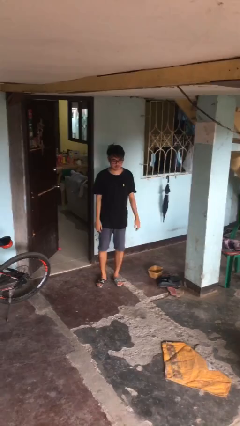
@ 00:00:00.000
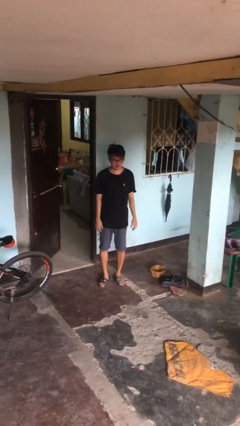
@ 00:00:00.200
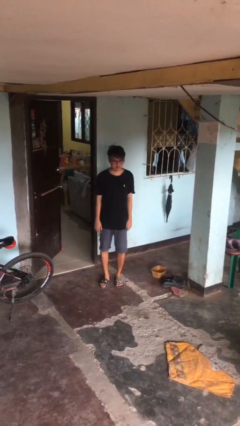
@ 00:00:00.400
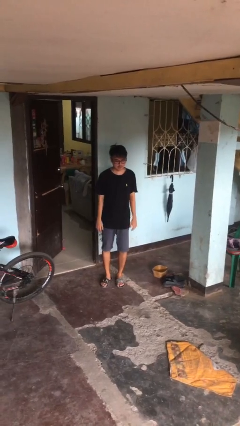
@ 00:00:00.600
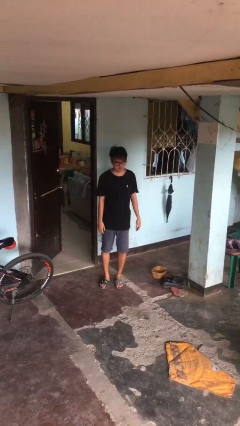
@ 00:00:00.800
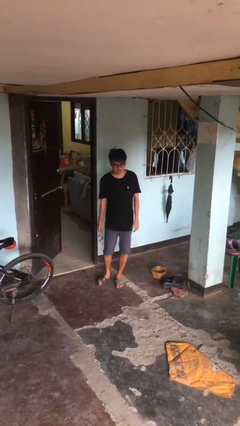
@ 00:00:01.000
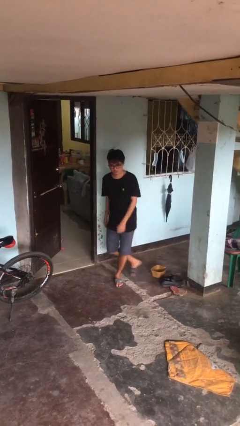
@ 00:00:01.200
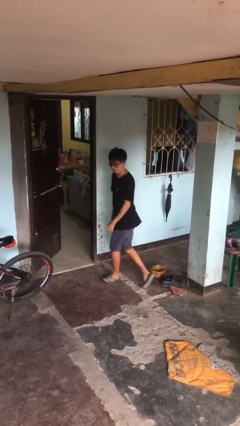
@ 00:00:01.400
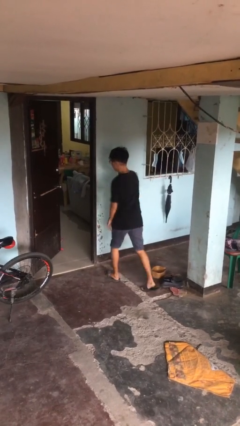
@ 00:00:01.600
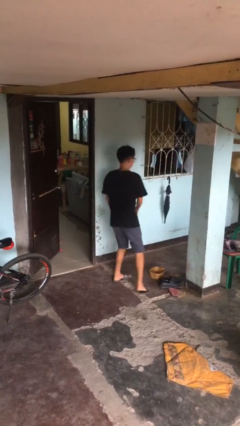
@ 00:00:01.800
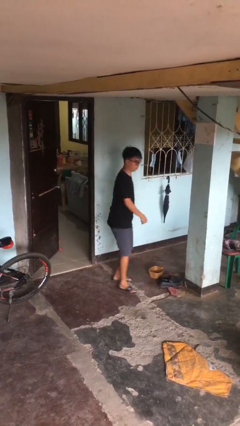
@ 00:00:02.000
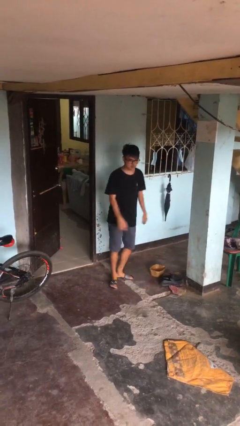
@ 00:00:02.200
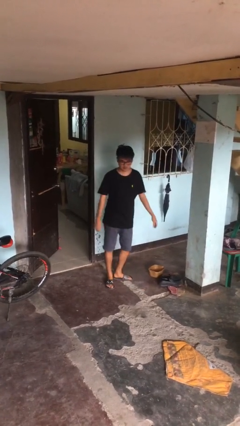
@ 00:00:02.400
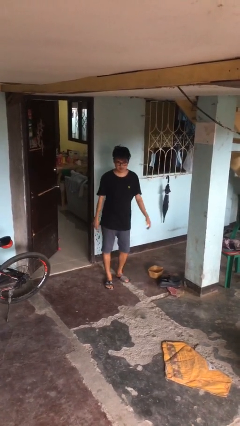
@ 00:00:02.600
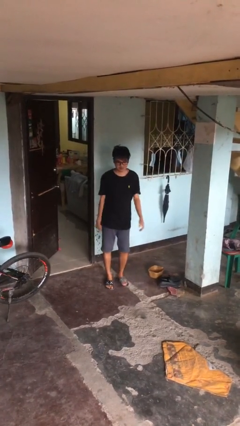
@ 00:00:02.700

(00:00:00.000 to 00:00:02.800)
person twirls

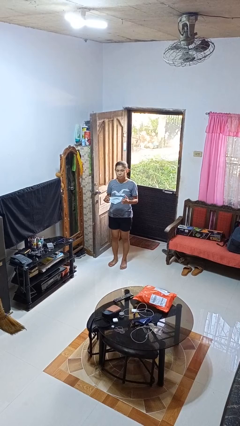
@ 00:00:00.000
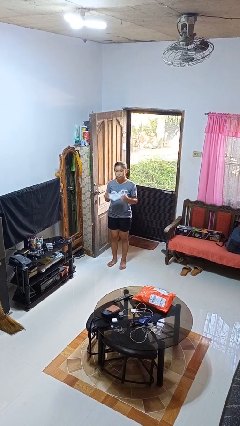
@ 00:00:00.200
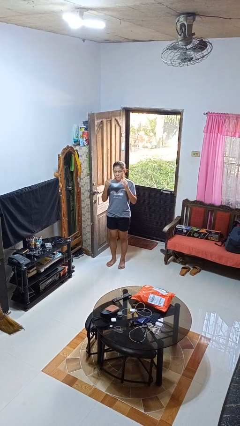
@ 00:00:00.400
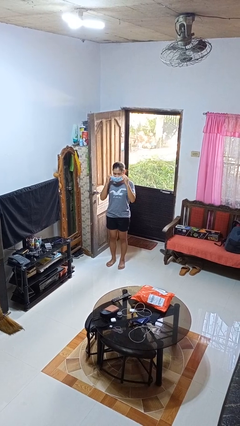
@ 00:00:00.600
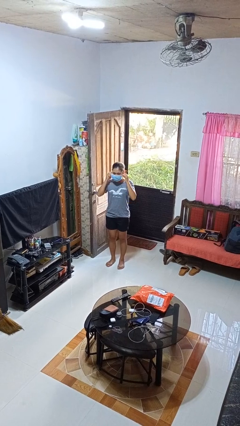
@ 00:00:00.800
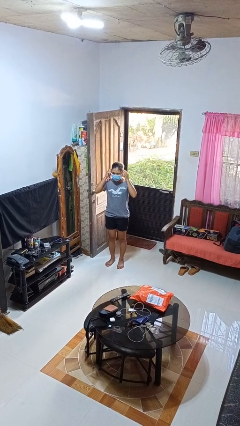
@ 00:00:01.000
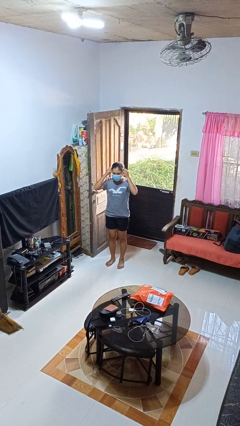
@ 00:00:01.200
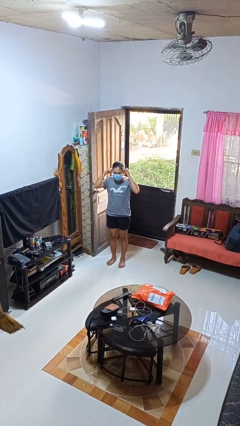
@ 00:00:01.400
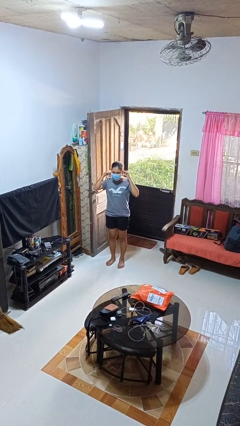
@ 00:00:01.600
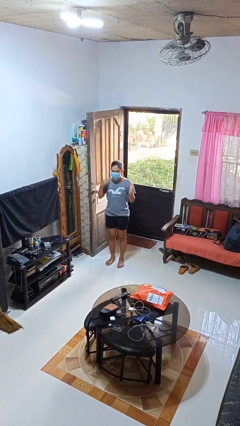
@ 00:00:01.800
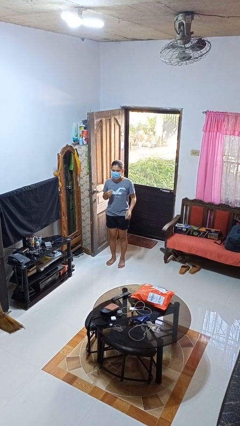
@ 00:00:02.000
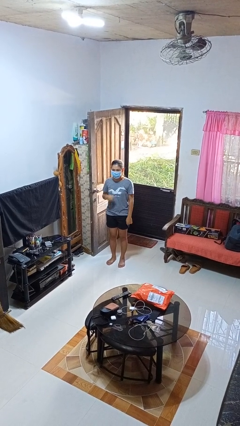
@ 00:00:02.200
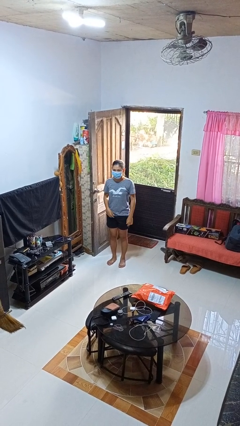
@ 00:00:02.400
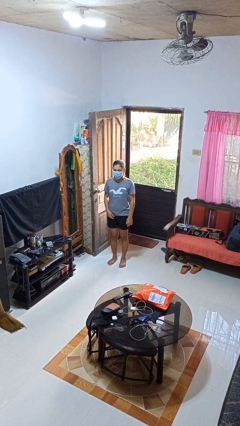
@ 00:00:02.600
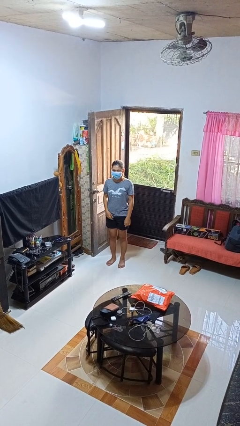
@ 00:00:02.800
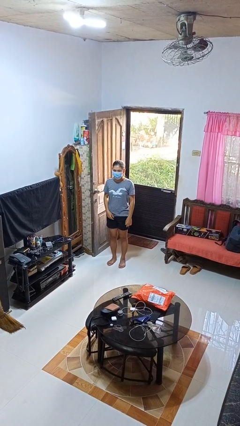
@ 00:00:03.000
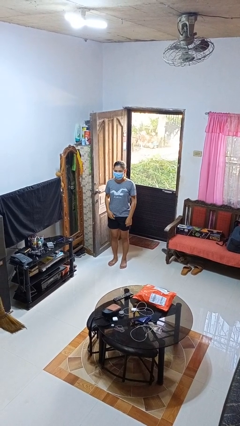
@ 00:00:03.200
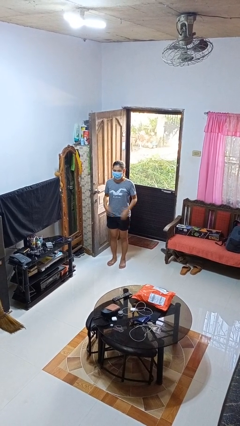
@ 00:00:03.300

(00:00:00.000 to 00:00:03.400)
person puts on facemask

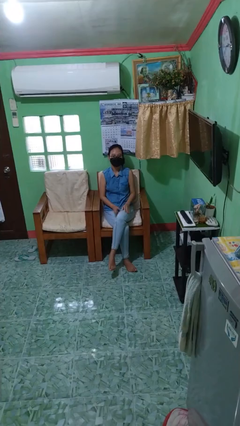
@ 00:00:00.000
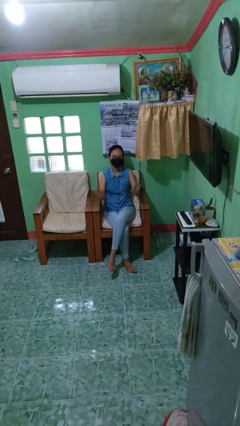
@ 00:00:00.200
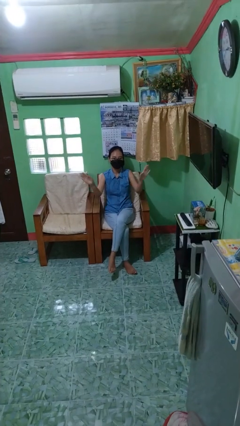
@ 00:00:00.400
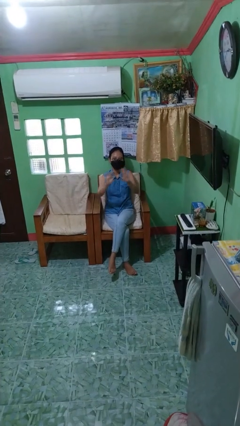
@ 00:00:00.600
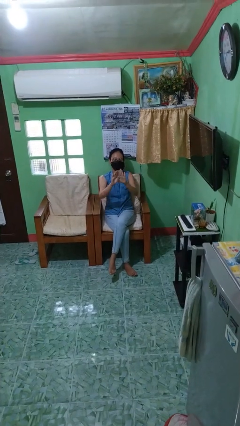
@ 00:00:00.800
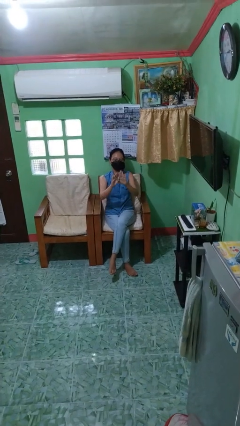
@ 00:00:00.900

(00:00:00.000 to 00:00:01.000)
person gestures zoom out

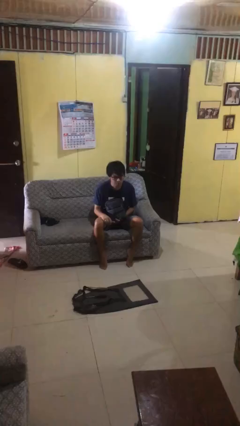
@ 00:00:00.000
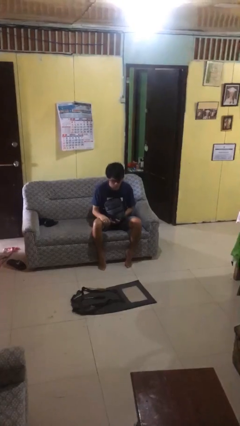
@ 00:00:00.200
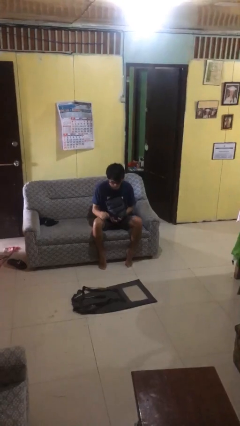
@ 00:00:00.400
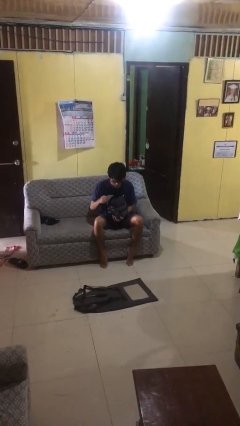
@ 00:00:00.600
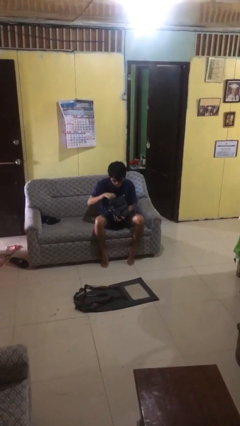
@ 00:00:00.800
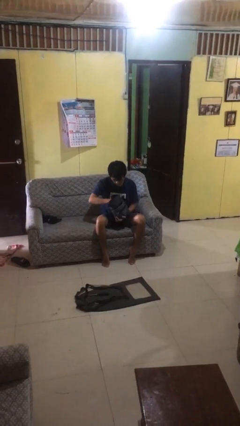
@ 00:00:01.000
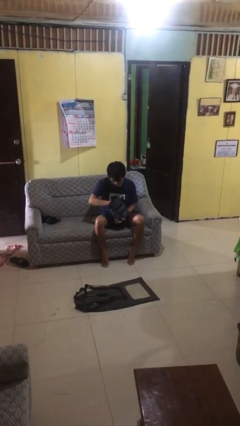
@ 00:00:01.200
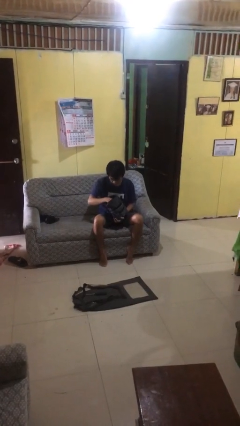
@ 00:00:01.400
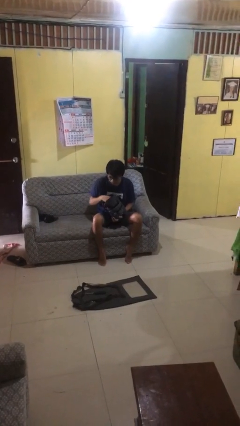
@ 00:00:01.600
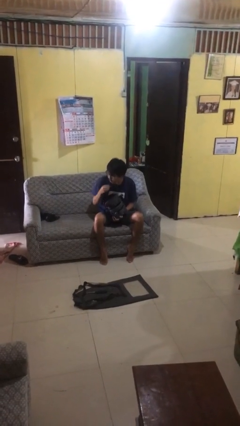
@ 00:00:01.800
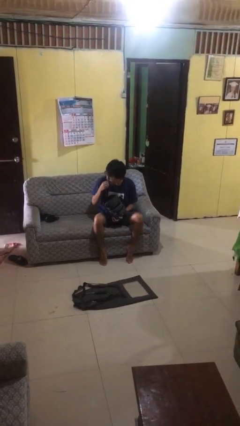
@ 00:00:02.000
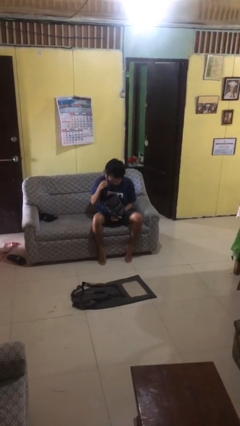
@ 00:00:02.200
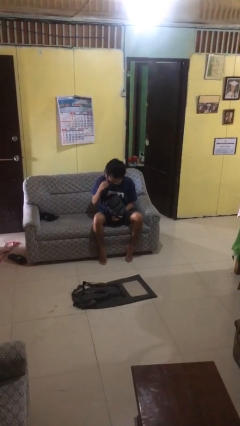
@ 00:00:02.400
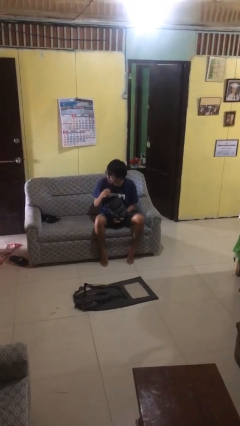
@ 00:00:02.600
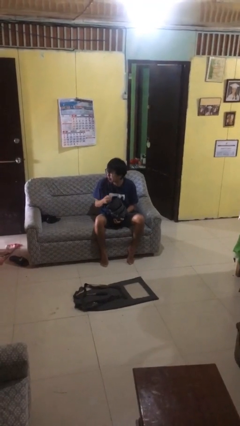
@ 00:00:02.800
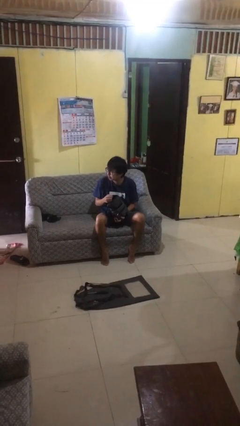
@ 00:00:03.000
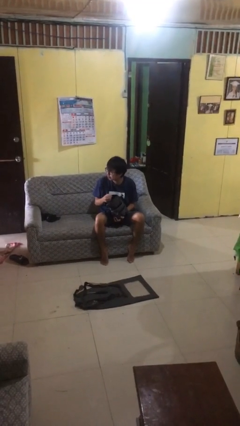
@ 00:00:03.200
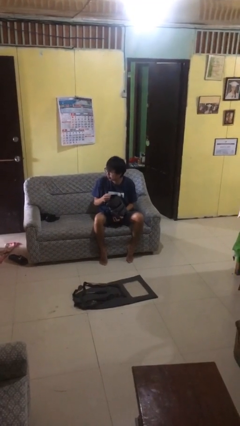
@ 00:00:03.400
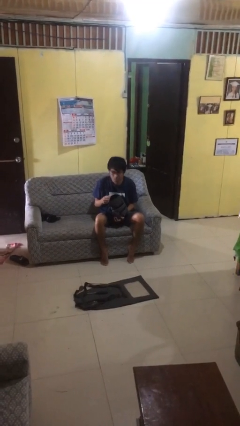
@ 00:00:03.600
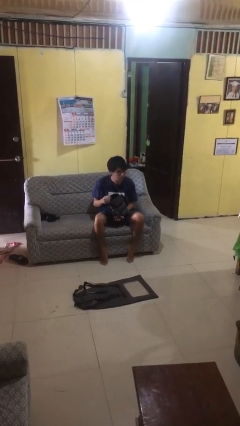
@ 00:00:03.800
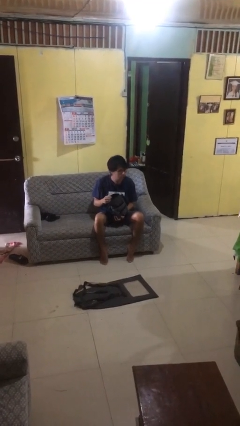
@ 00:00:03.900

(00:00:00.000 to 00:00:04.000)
person eats snack from bag

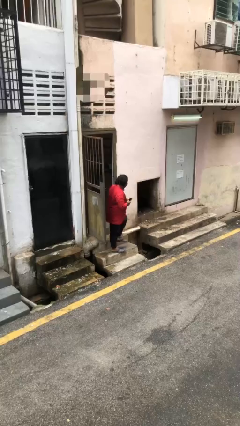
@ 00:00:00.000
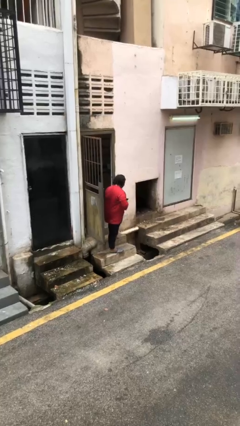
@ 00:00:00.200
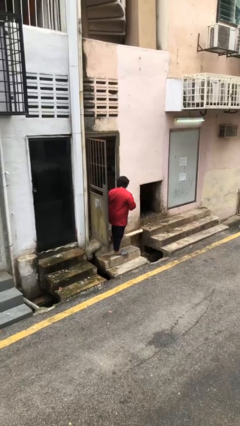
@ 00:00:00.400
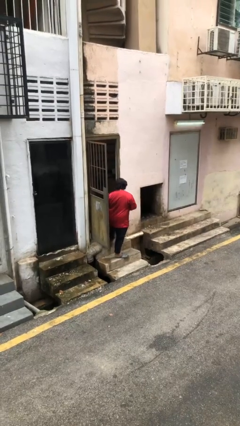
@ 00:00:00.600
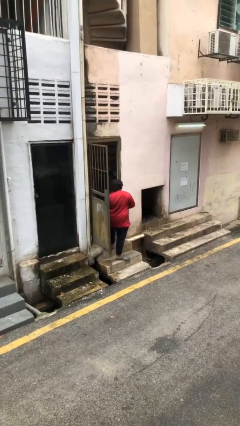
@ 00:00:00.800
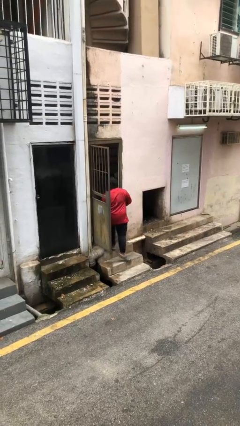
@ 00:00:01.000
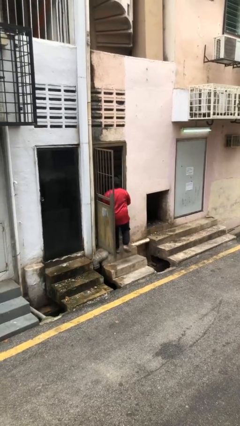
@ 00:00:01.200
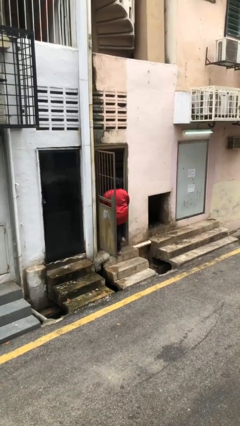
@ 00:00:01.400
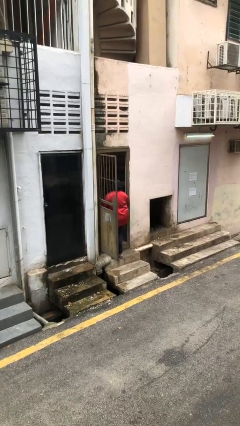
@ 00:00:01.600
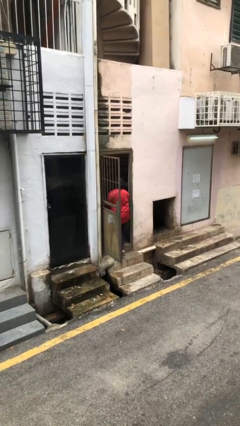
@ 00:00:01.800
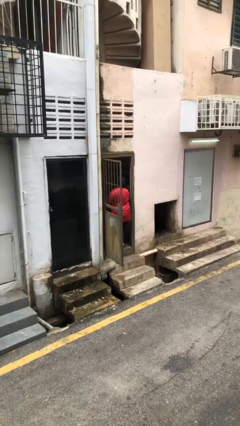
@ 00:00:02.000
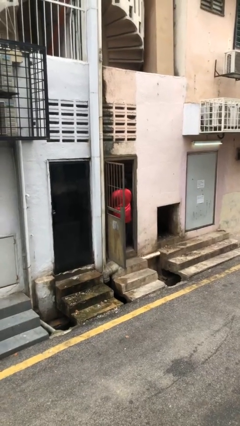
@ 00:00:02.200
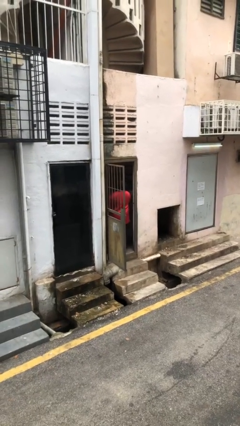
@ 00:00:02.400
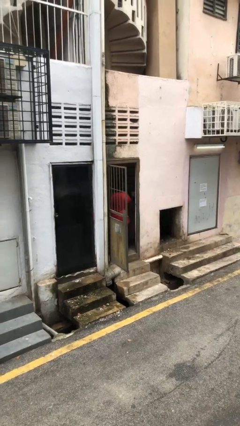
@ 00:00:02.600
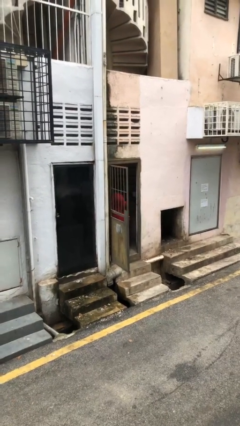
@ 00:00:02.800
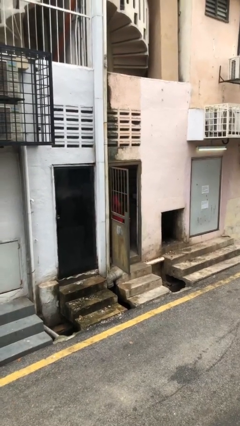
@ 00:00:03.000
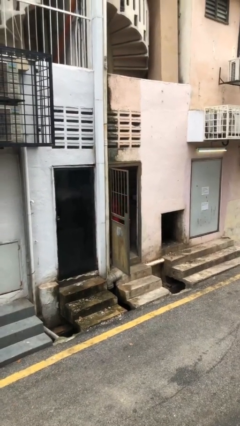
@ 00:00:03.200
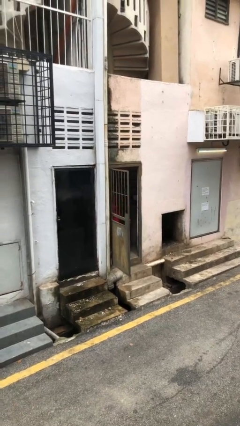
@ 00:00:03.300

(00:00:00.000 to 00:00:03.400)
person exits scene through structure

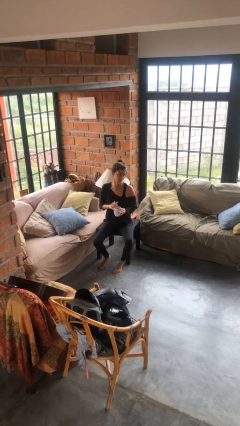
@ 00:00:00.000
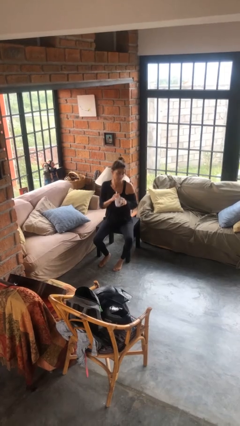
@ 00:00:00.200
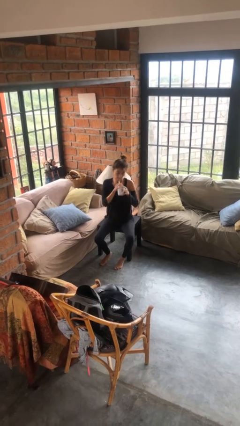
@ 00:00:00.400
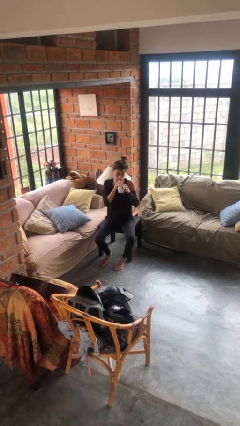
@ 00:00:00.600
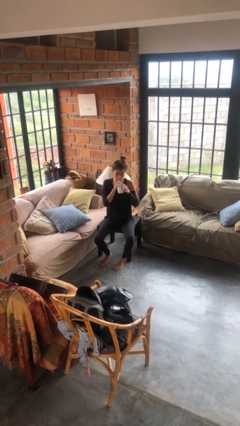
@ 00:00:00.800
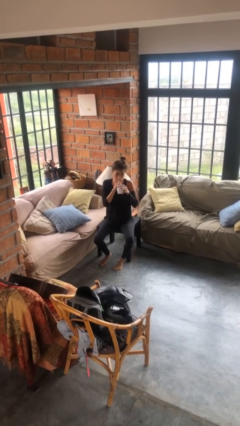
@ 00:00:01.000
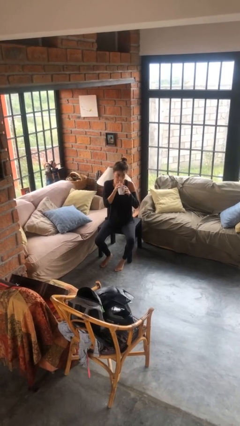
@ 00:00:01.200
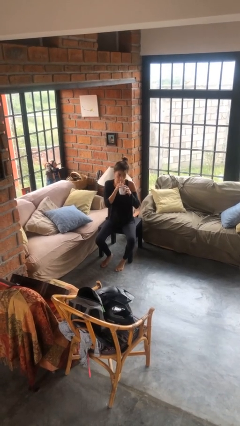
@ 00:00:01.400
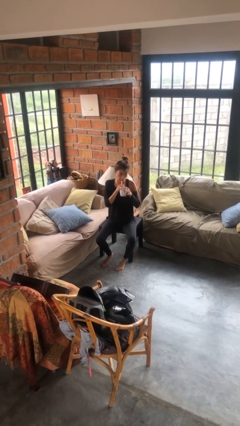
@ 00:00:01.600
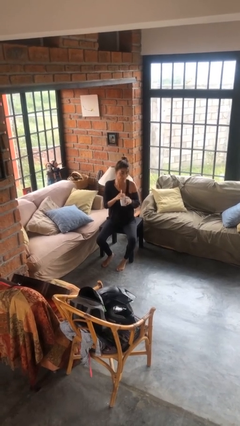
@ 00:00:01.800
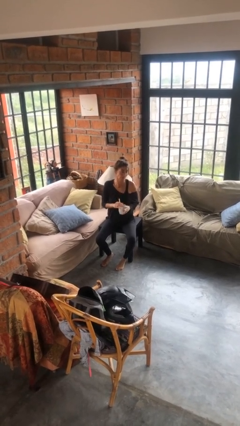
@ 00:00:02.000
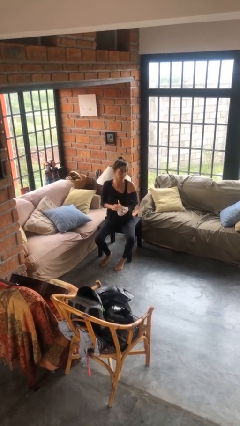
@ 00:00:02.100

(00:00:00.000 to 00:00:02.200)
person drinks from straw
